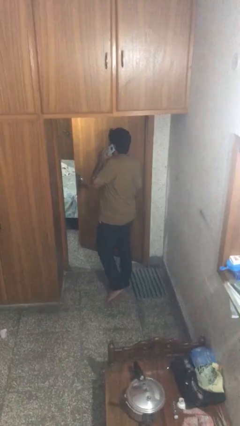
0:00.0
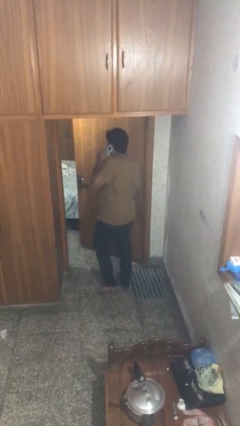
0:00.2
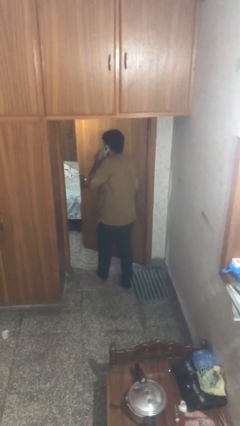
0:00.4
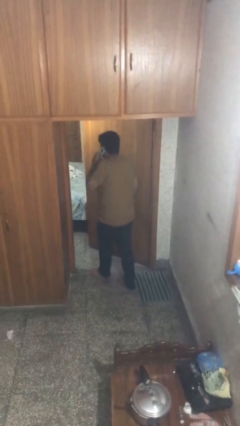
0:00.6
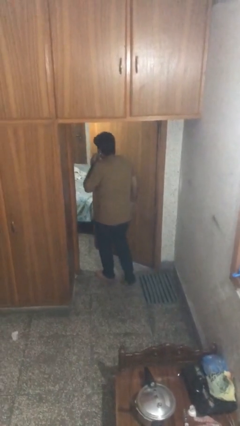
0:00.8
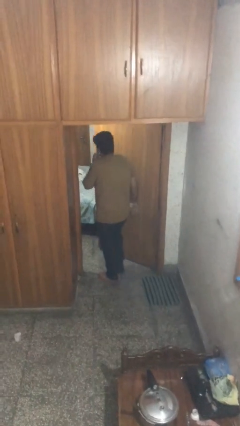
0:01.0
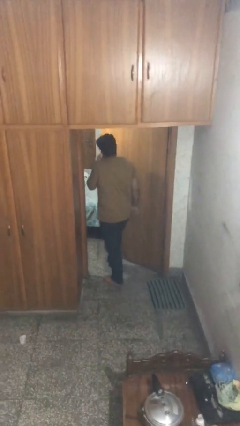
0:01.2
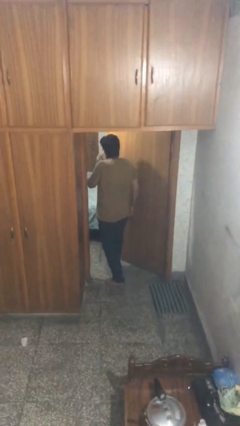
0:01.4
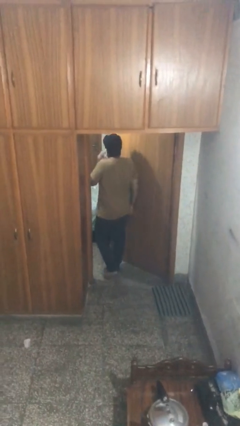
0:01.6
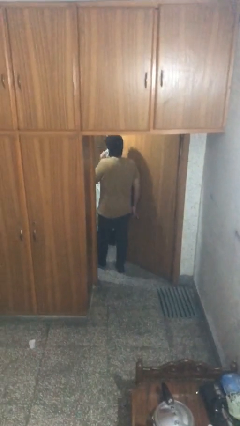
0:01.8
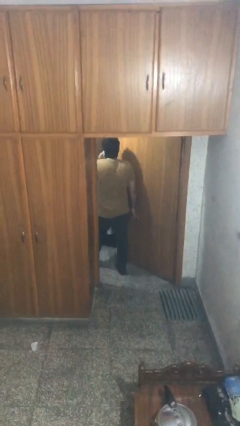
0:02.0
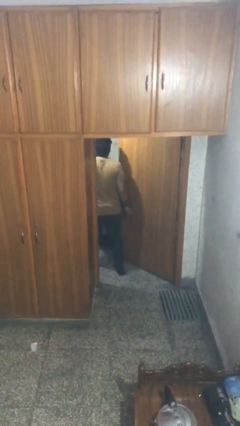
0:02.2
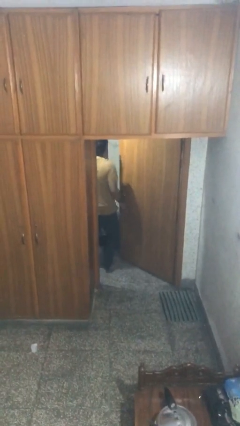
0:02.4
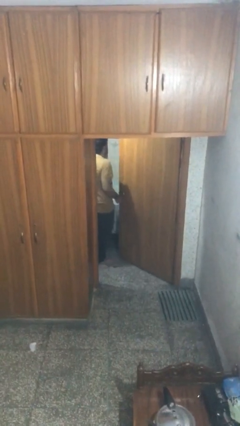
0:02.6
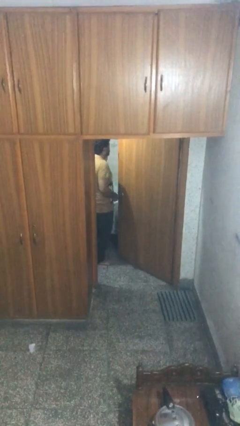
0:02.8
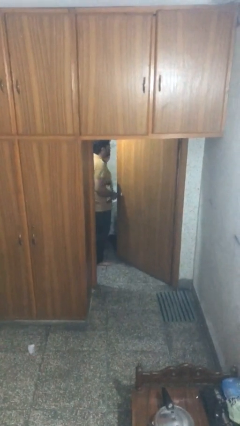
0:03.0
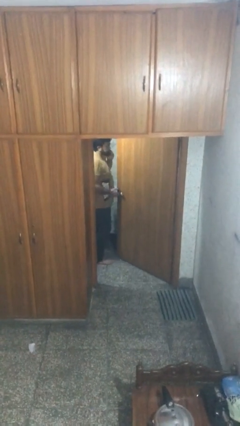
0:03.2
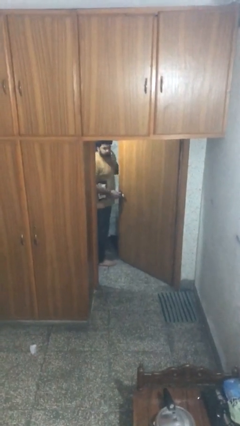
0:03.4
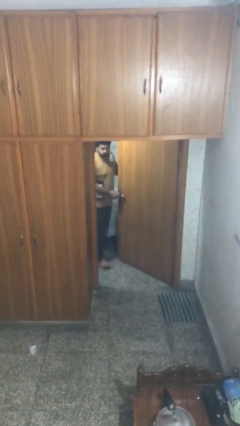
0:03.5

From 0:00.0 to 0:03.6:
person exits scene through structure

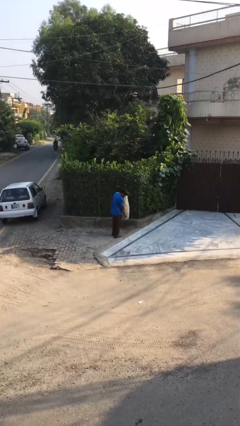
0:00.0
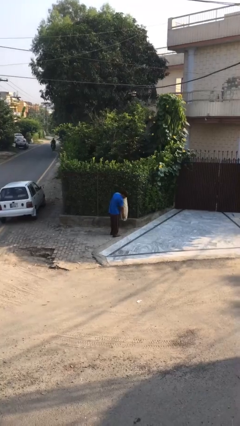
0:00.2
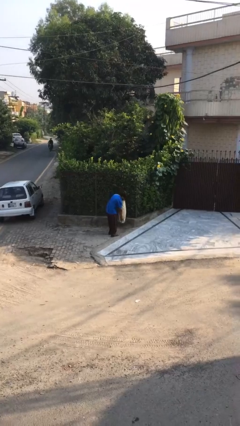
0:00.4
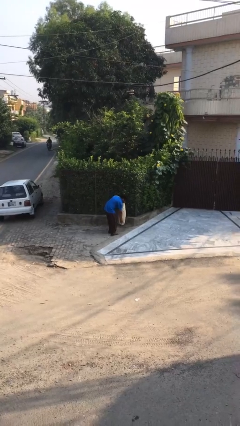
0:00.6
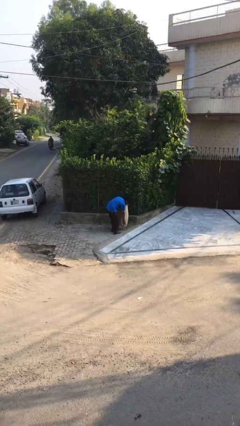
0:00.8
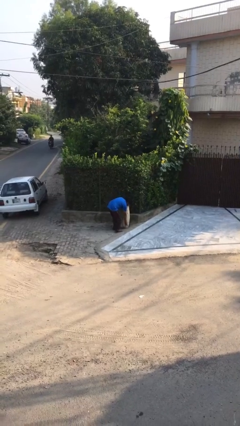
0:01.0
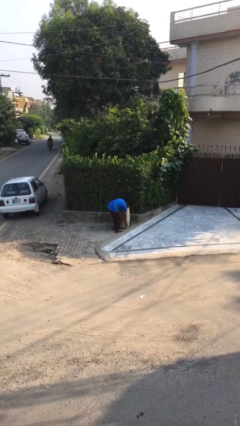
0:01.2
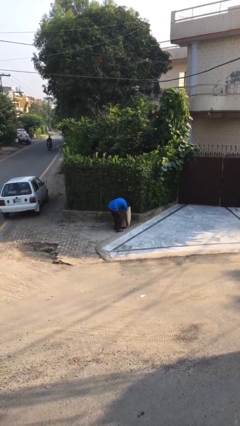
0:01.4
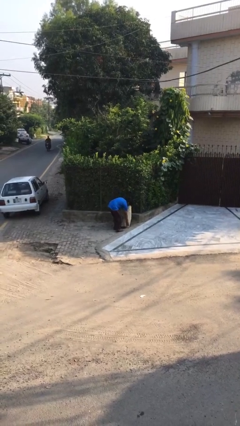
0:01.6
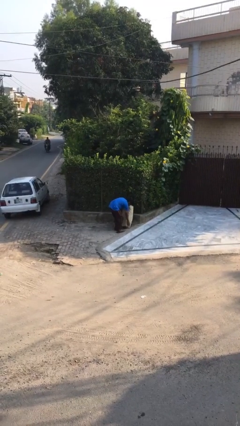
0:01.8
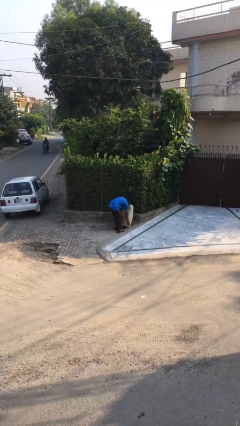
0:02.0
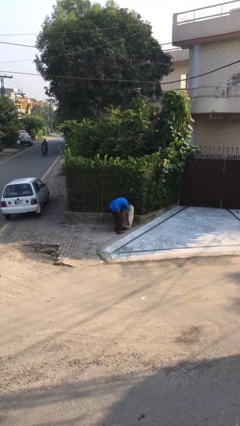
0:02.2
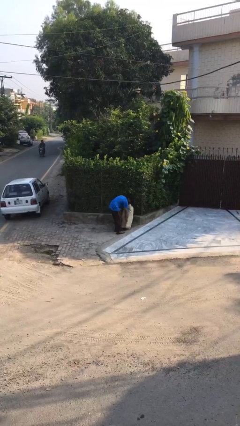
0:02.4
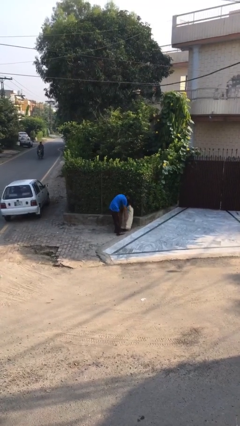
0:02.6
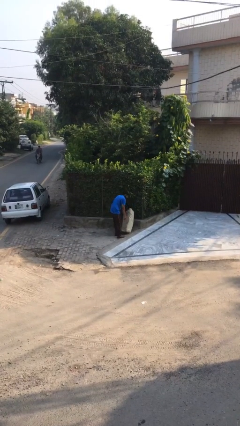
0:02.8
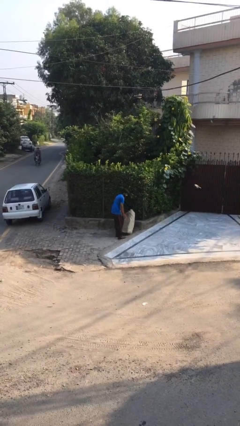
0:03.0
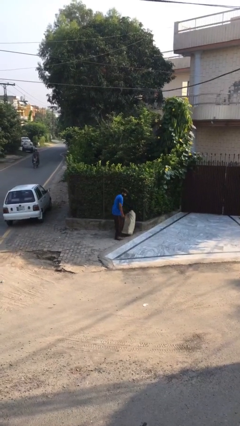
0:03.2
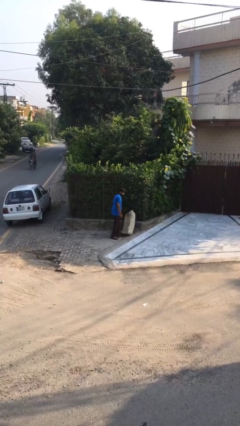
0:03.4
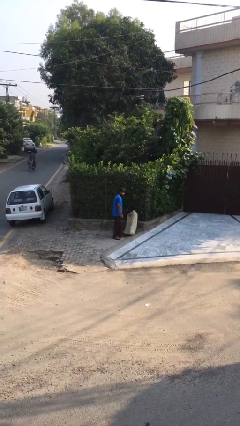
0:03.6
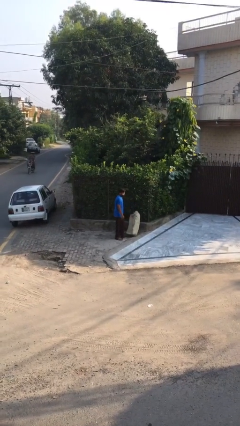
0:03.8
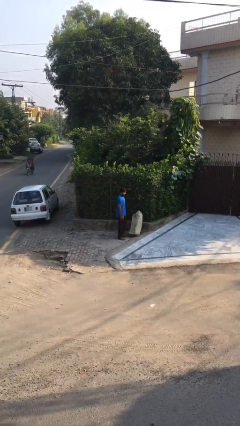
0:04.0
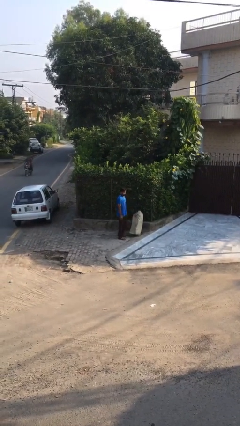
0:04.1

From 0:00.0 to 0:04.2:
person puts down object on floor

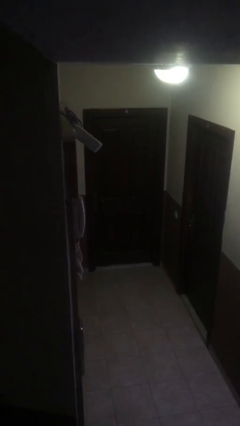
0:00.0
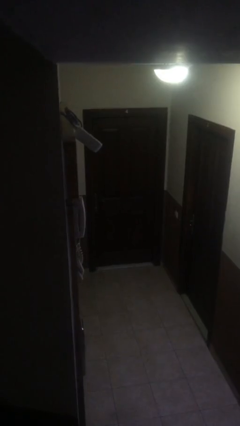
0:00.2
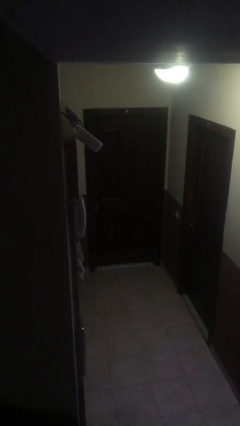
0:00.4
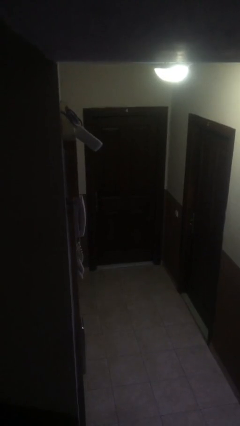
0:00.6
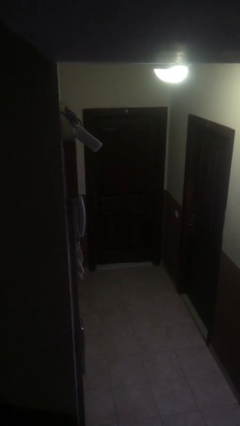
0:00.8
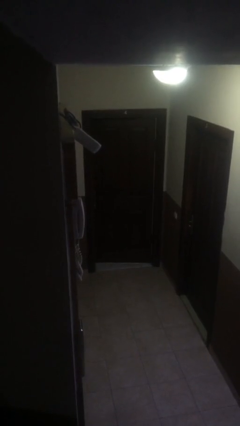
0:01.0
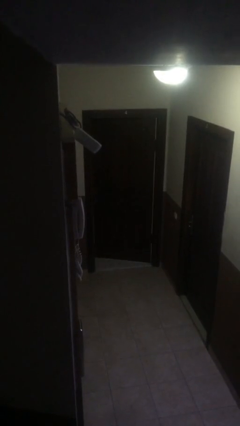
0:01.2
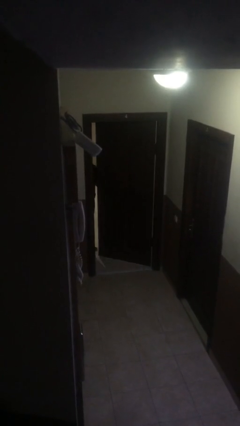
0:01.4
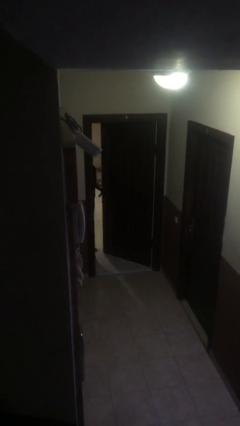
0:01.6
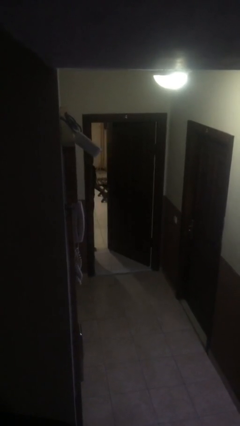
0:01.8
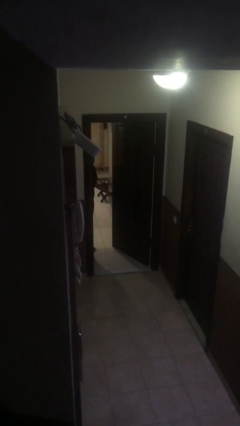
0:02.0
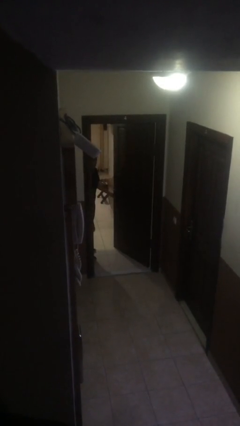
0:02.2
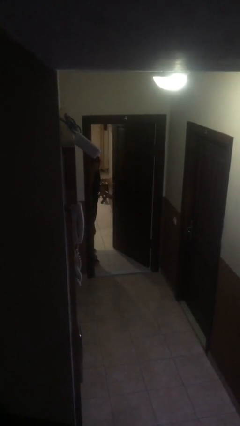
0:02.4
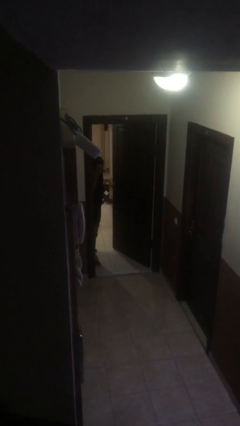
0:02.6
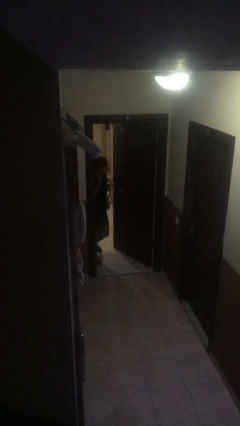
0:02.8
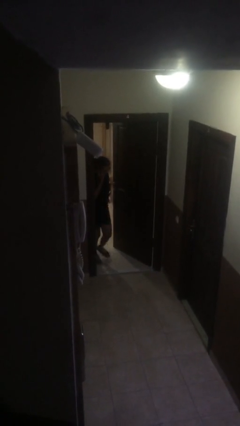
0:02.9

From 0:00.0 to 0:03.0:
person opens facility door

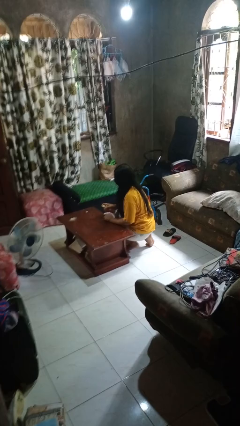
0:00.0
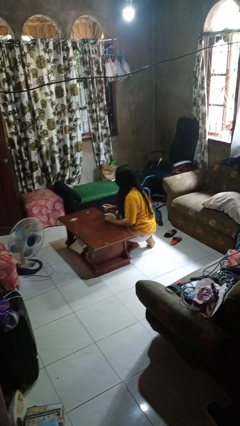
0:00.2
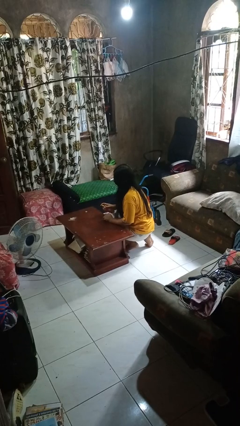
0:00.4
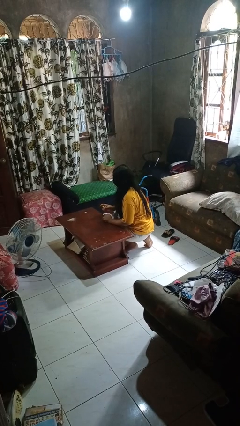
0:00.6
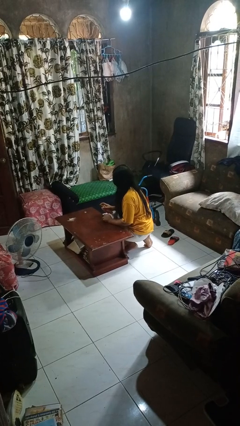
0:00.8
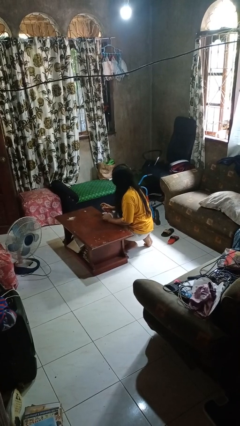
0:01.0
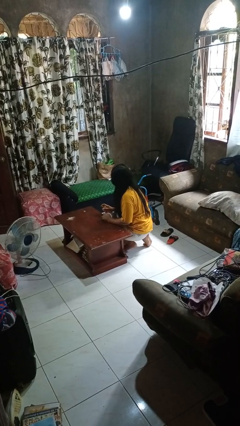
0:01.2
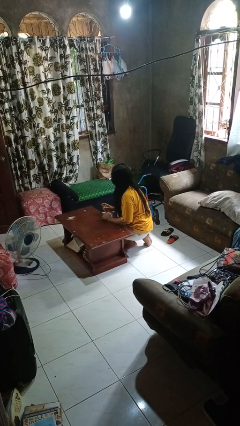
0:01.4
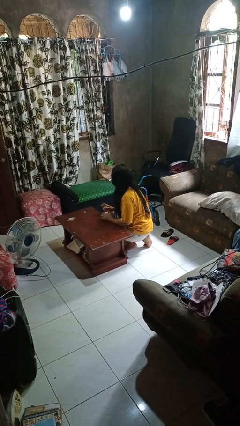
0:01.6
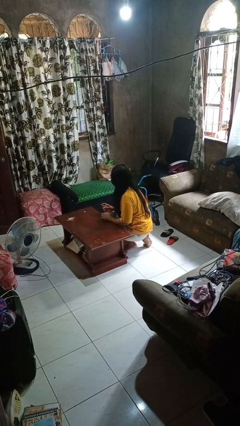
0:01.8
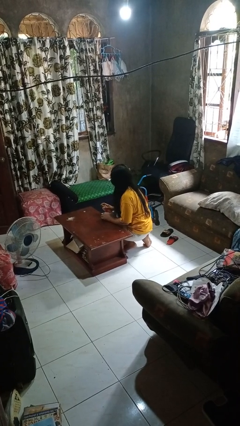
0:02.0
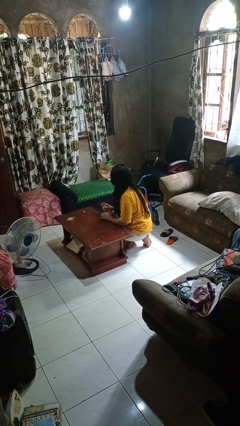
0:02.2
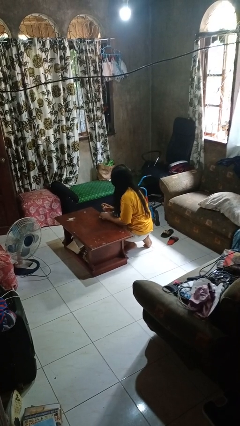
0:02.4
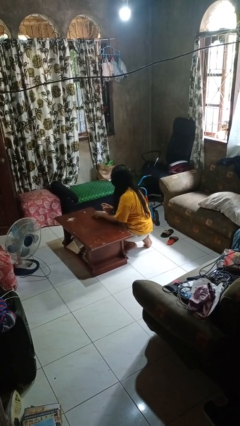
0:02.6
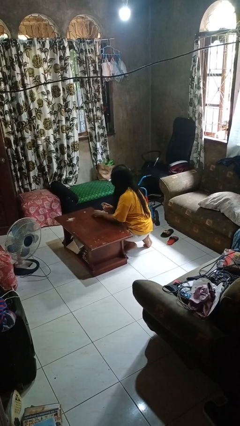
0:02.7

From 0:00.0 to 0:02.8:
person sprays from bottle

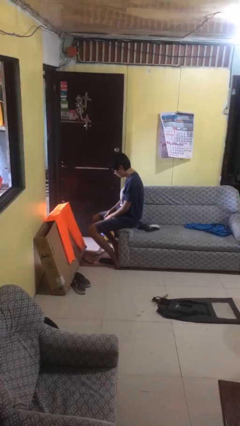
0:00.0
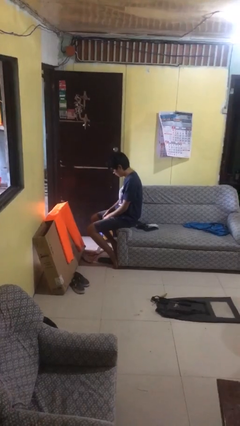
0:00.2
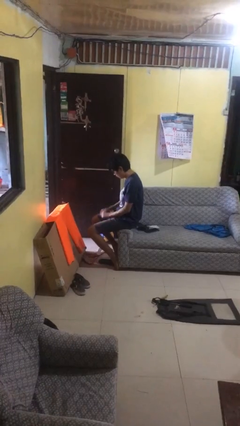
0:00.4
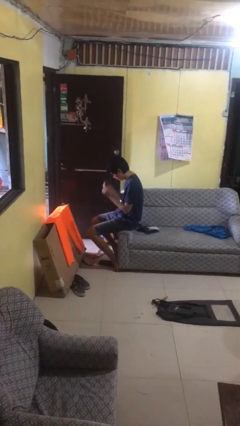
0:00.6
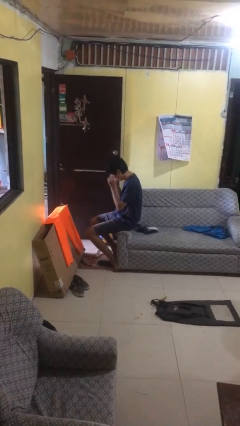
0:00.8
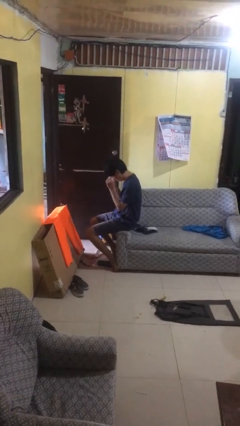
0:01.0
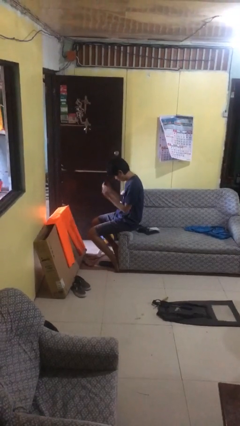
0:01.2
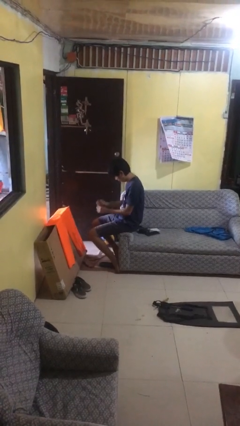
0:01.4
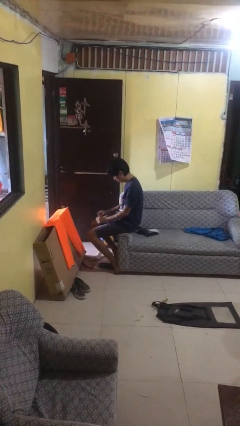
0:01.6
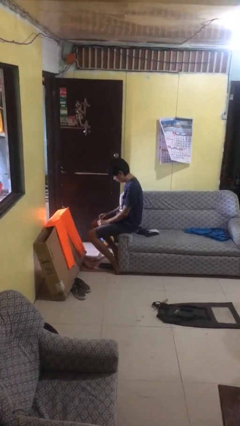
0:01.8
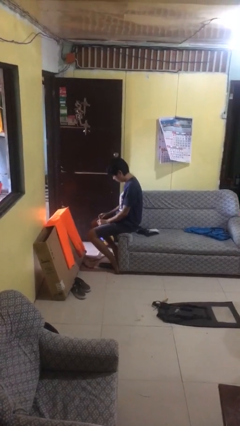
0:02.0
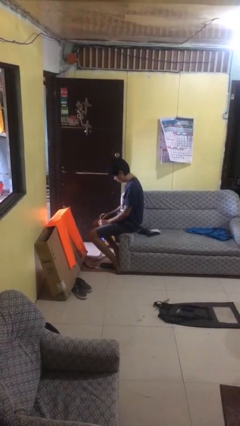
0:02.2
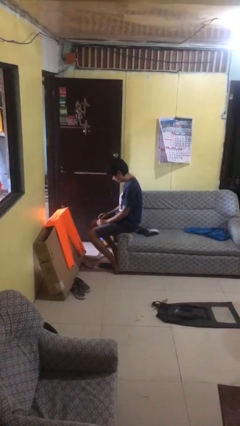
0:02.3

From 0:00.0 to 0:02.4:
person takes off glasses

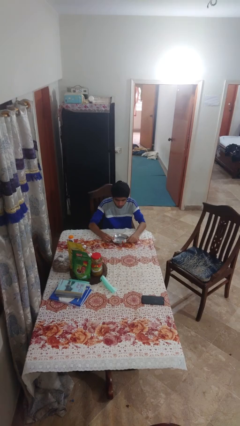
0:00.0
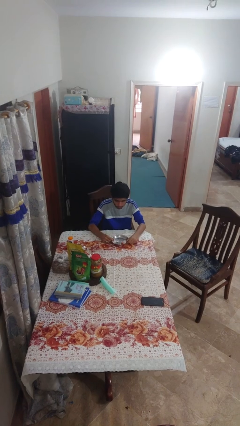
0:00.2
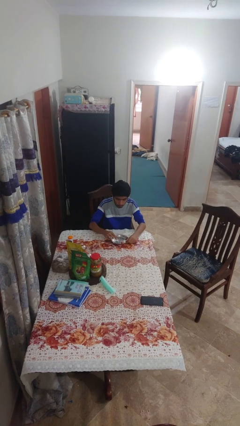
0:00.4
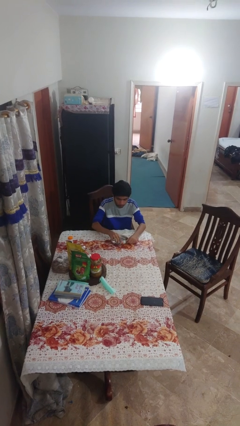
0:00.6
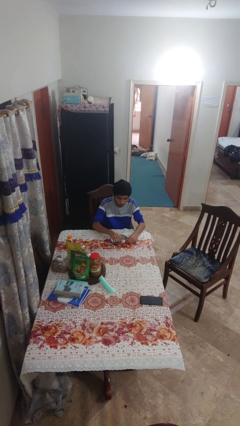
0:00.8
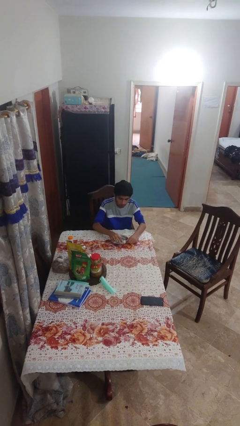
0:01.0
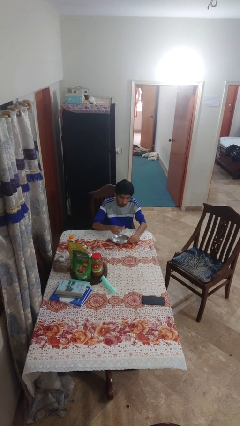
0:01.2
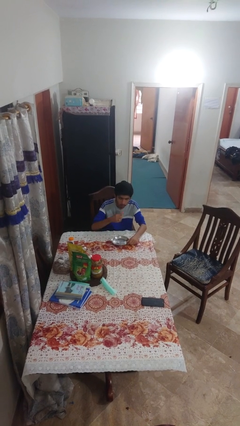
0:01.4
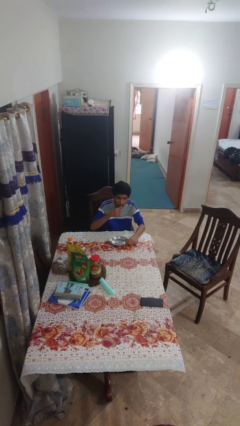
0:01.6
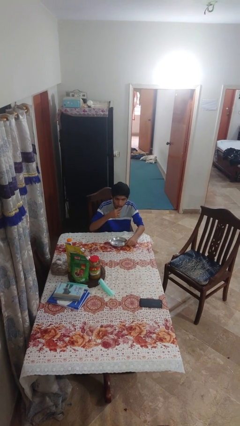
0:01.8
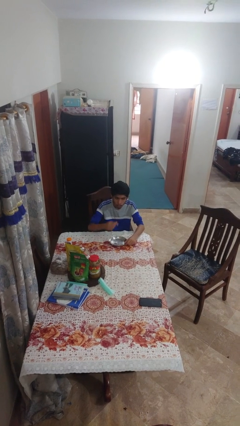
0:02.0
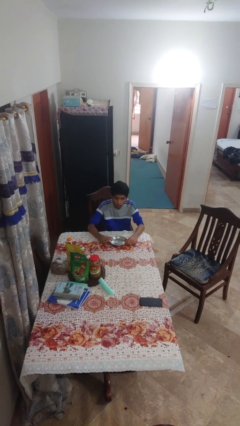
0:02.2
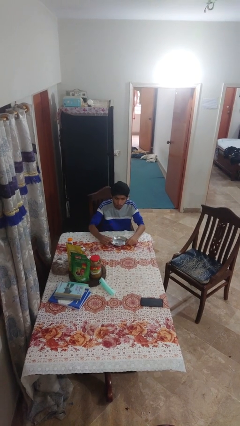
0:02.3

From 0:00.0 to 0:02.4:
person eats with hands
